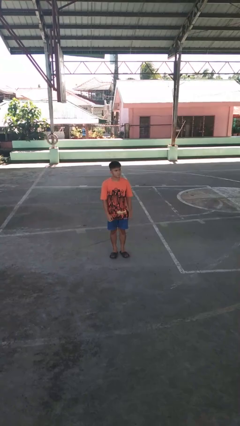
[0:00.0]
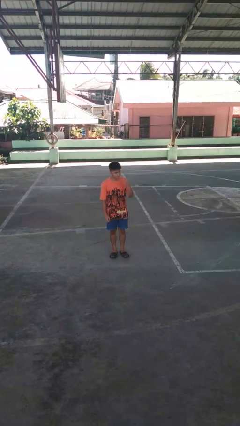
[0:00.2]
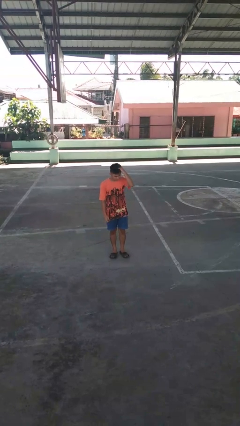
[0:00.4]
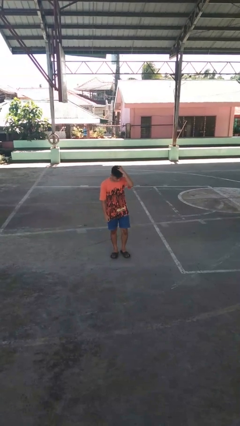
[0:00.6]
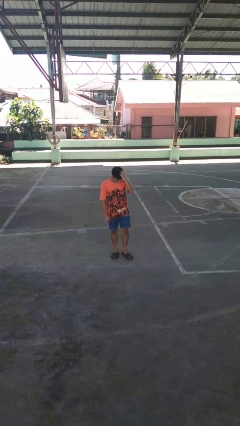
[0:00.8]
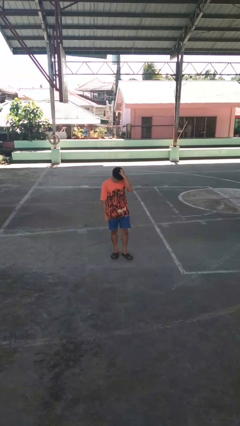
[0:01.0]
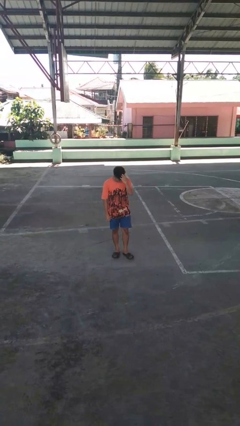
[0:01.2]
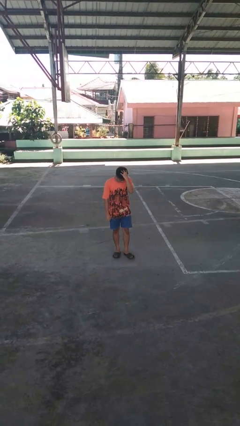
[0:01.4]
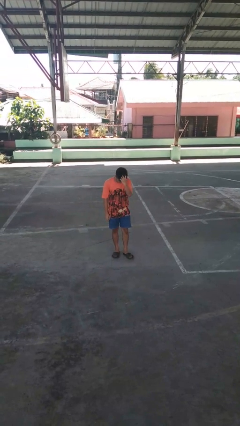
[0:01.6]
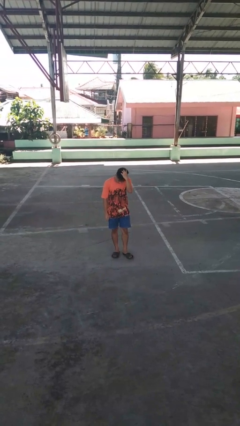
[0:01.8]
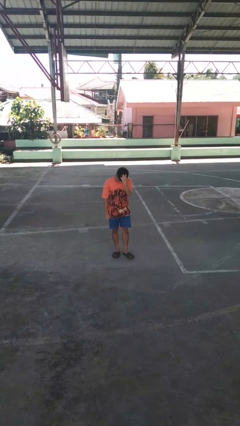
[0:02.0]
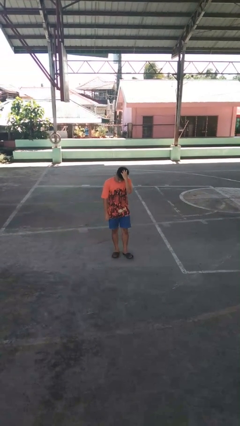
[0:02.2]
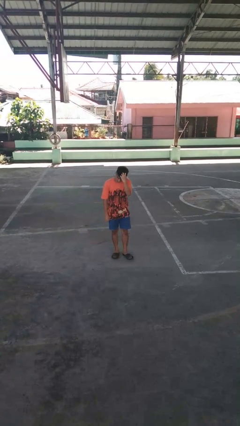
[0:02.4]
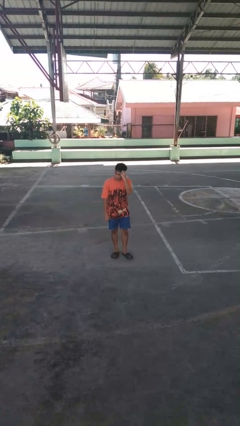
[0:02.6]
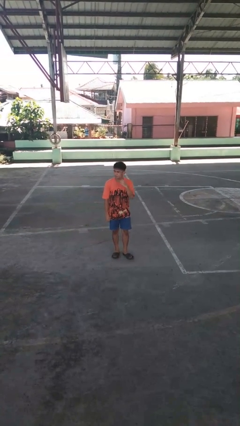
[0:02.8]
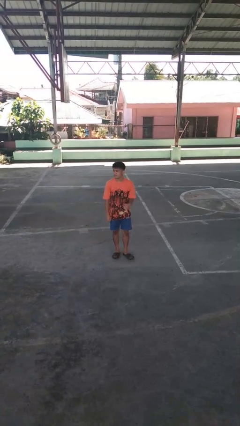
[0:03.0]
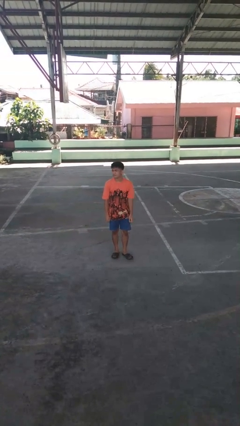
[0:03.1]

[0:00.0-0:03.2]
person scratches face

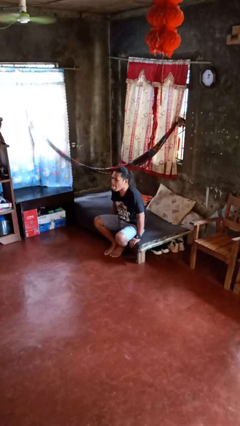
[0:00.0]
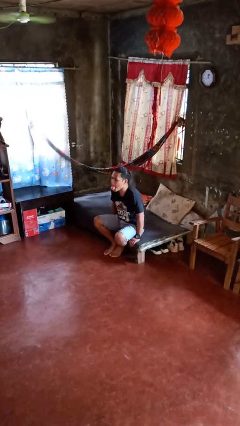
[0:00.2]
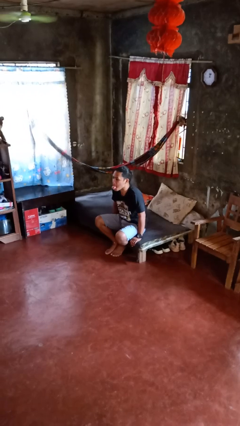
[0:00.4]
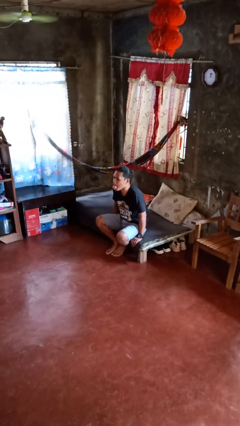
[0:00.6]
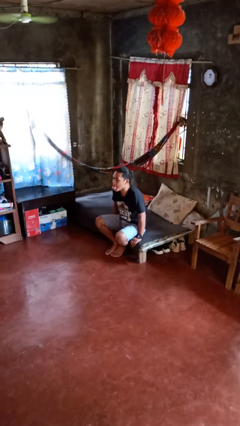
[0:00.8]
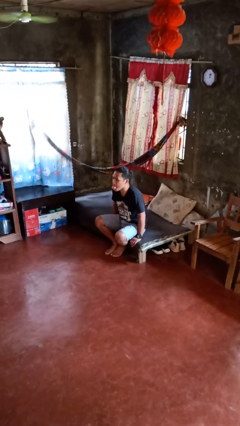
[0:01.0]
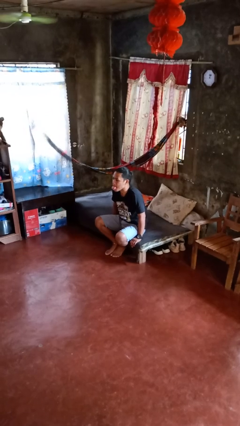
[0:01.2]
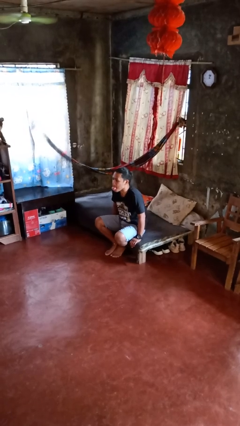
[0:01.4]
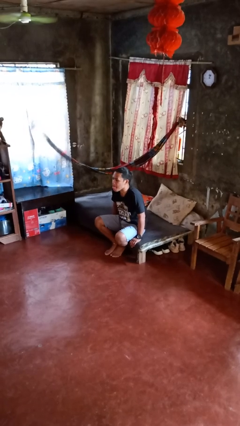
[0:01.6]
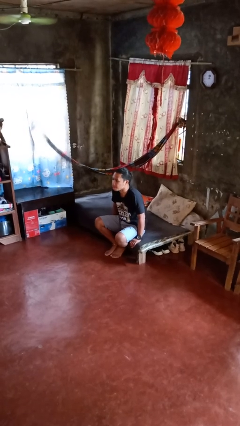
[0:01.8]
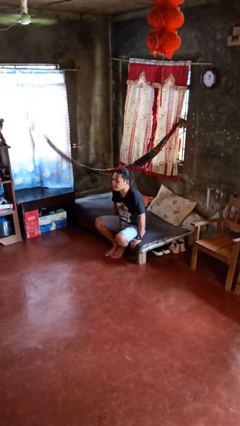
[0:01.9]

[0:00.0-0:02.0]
person sticks out tongue

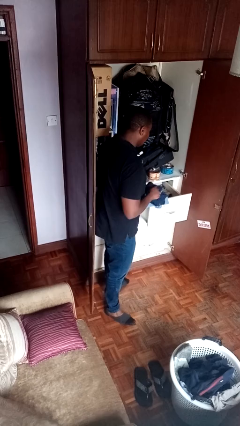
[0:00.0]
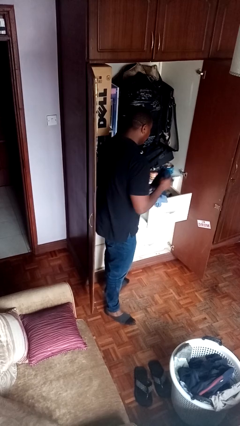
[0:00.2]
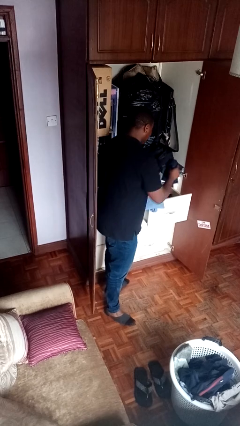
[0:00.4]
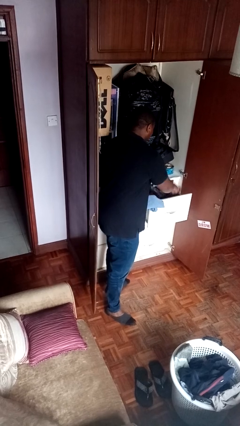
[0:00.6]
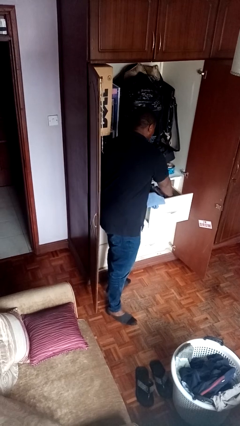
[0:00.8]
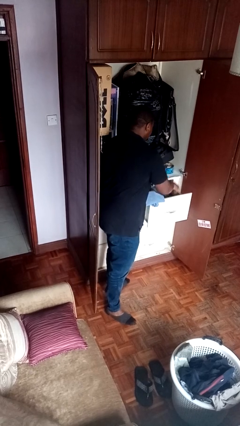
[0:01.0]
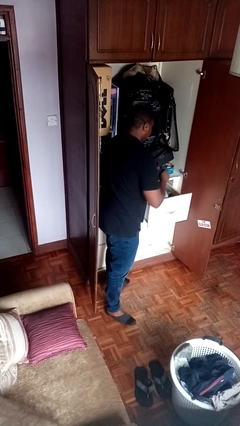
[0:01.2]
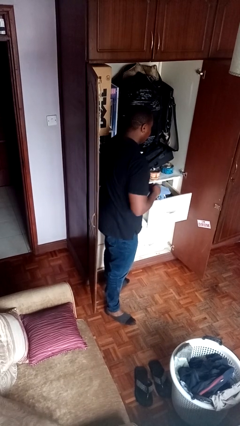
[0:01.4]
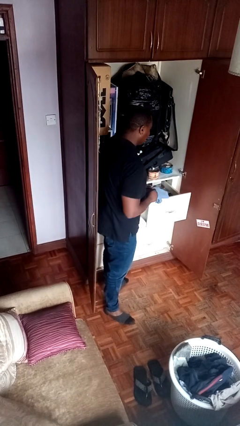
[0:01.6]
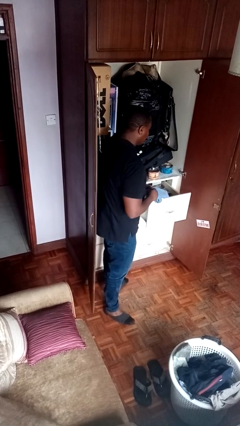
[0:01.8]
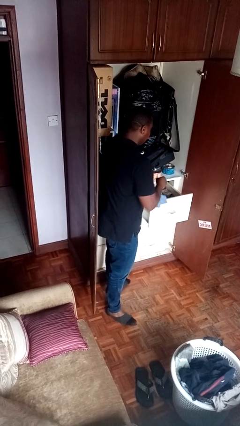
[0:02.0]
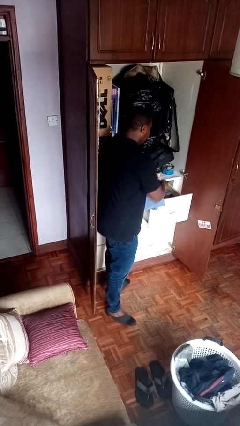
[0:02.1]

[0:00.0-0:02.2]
person puts clothes into dresser

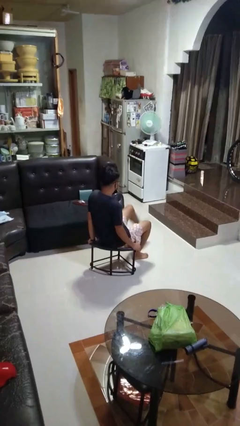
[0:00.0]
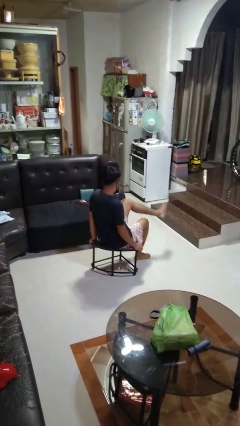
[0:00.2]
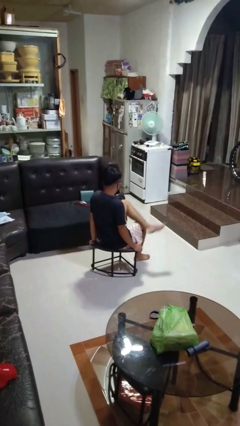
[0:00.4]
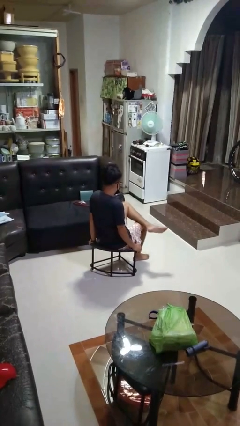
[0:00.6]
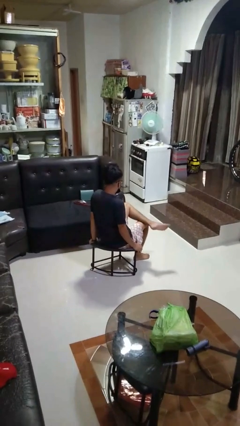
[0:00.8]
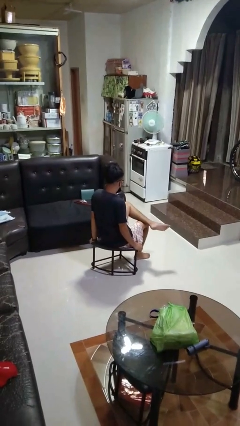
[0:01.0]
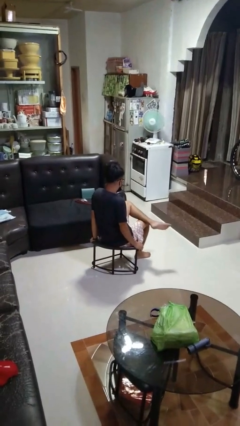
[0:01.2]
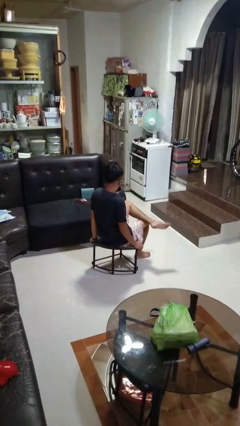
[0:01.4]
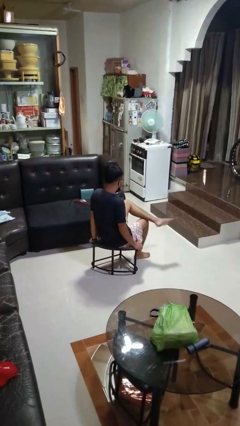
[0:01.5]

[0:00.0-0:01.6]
person crosses legs

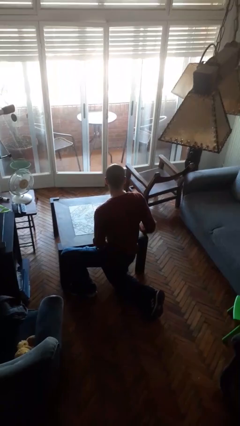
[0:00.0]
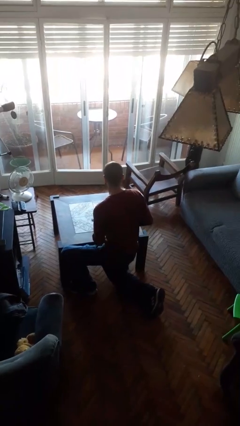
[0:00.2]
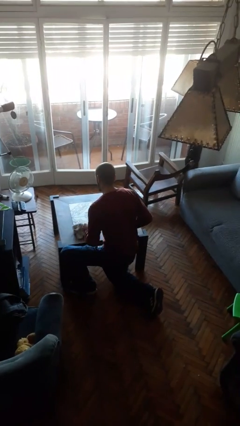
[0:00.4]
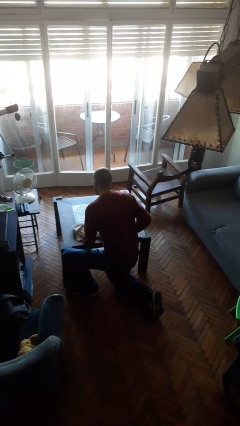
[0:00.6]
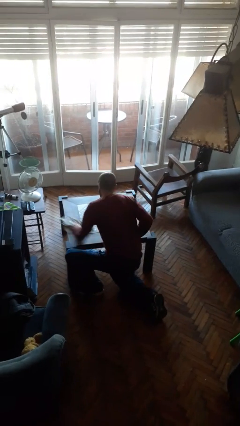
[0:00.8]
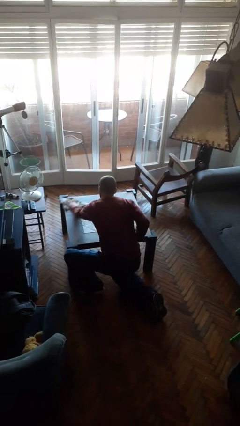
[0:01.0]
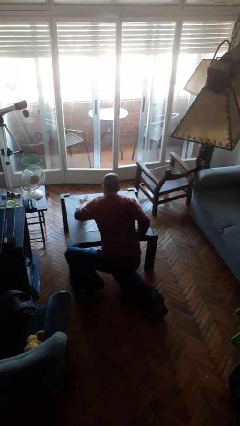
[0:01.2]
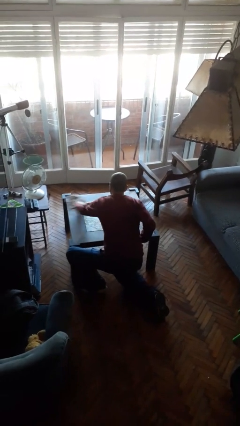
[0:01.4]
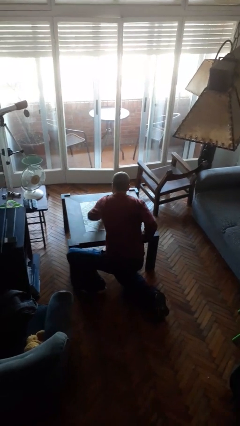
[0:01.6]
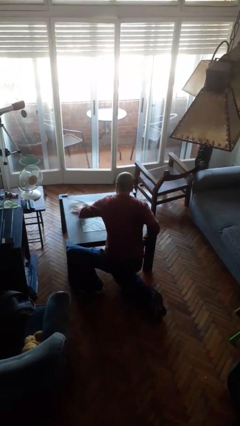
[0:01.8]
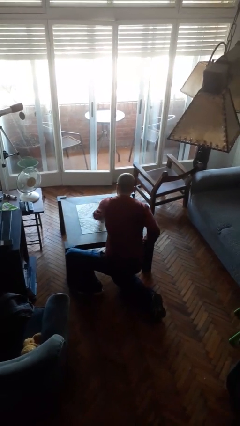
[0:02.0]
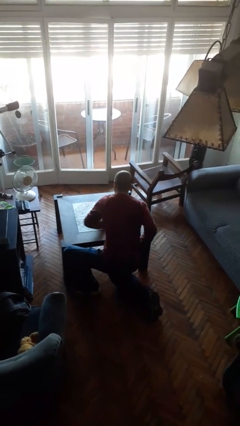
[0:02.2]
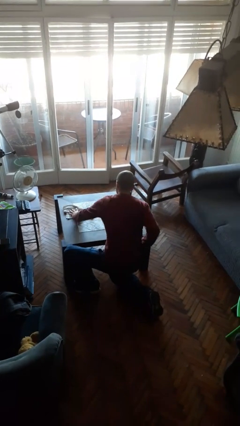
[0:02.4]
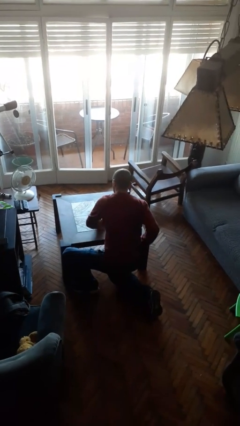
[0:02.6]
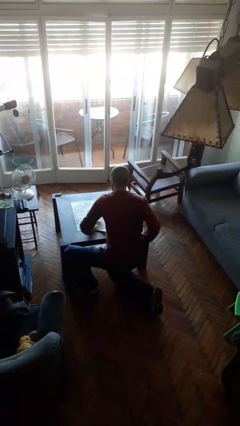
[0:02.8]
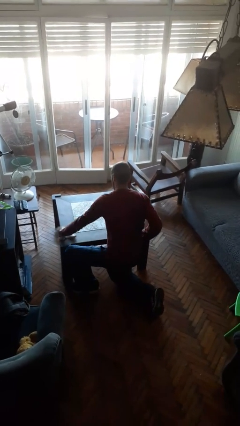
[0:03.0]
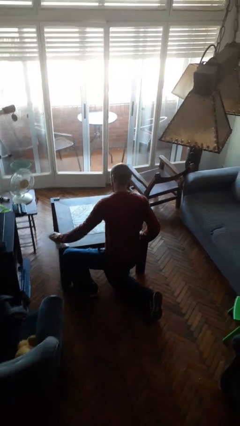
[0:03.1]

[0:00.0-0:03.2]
person cleans table with rag

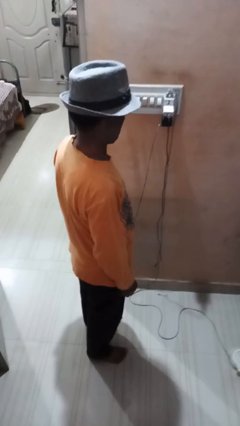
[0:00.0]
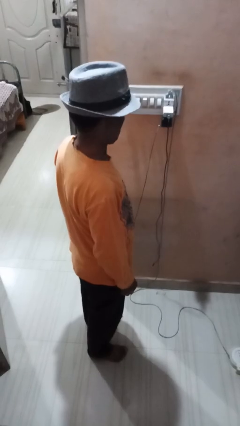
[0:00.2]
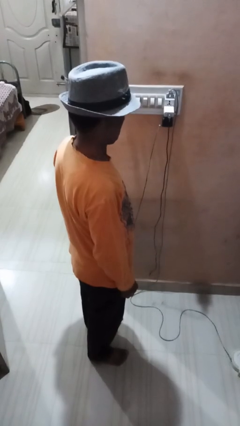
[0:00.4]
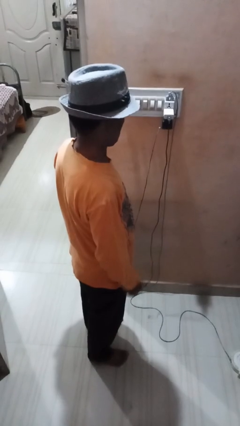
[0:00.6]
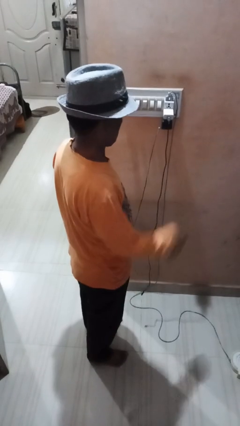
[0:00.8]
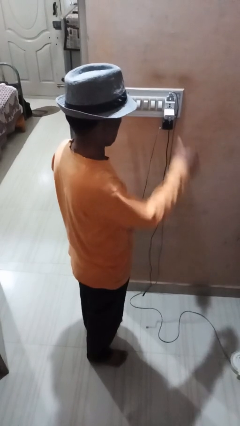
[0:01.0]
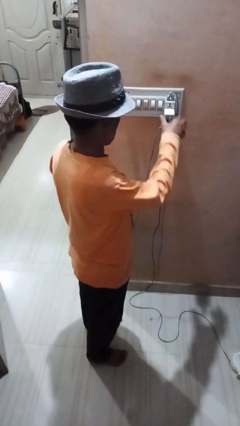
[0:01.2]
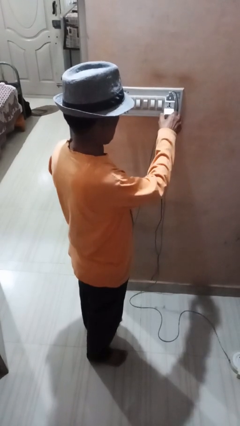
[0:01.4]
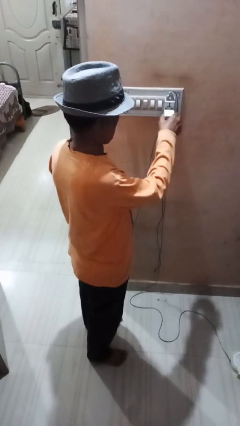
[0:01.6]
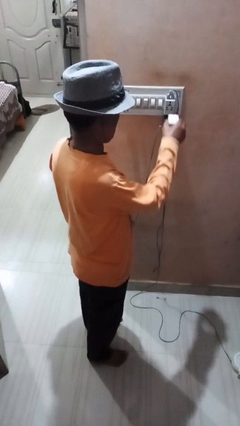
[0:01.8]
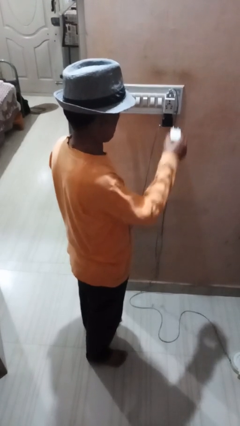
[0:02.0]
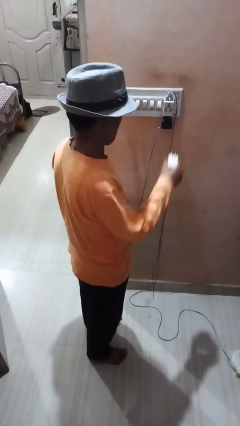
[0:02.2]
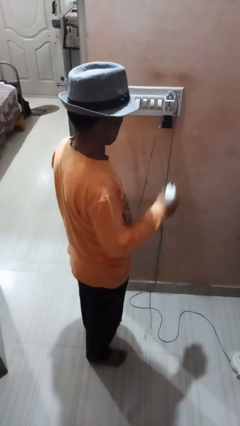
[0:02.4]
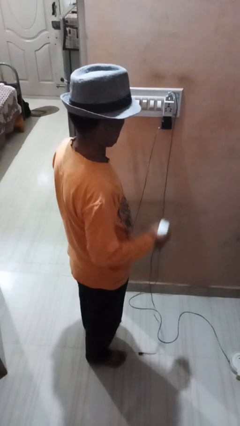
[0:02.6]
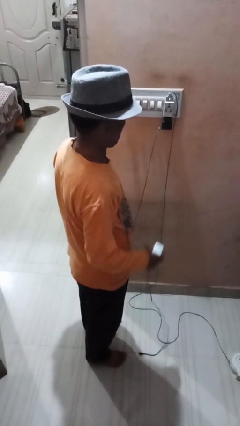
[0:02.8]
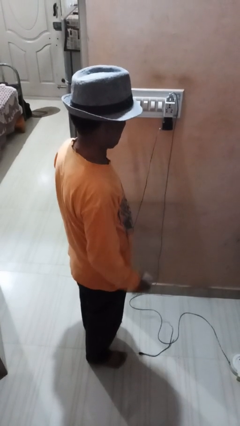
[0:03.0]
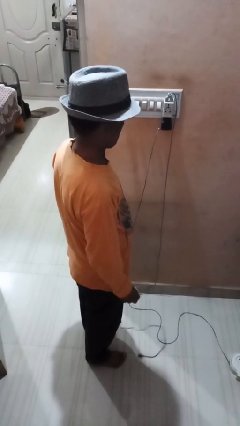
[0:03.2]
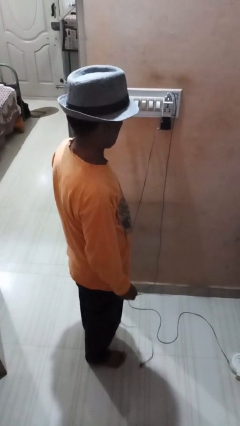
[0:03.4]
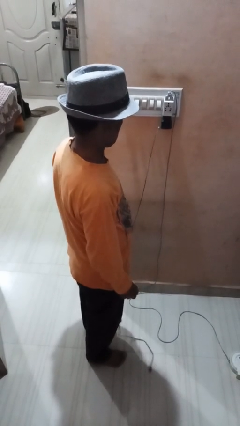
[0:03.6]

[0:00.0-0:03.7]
person unplugs from electrical socket

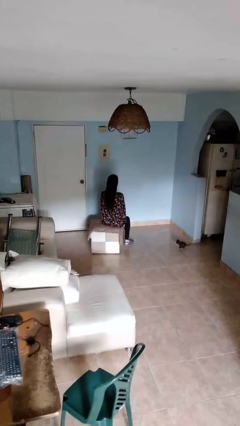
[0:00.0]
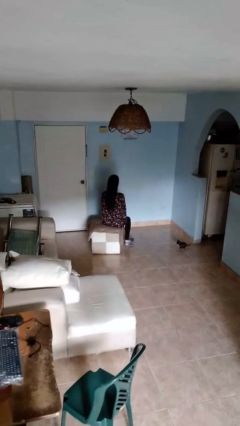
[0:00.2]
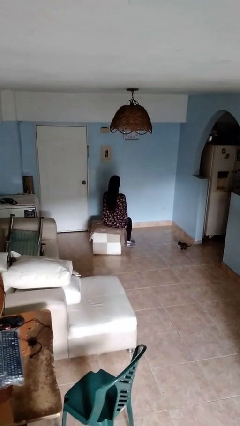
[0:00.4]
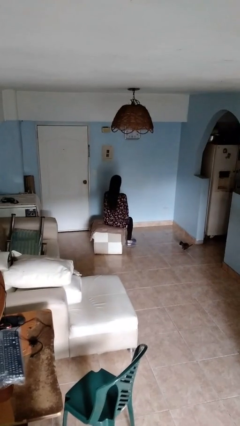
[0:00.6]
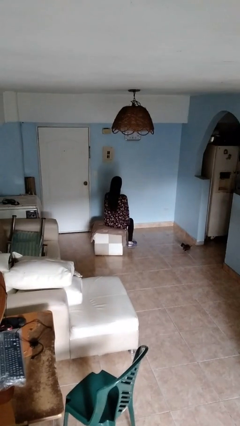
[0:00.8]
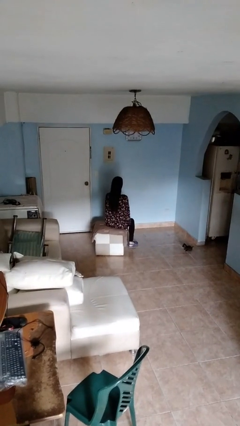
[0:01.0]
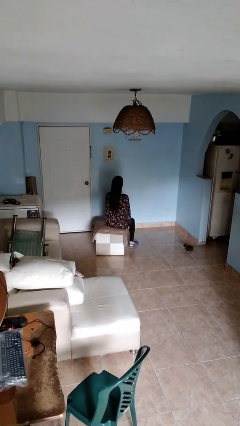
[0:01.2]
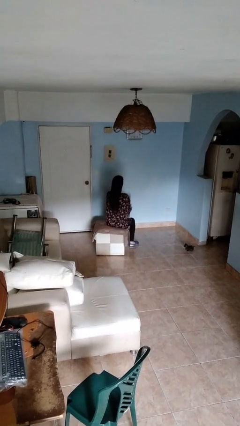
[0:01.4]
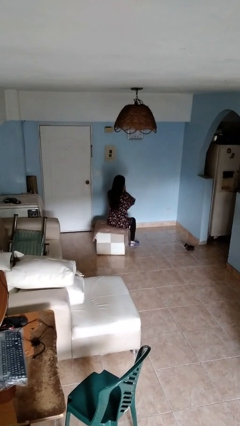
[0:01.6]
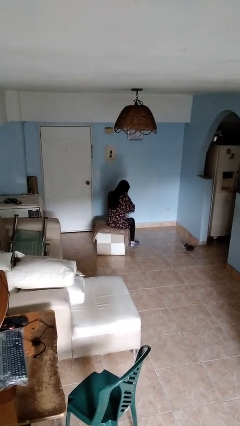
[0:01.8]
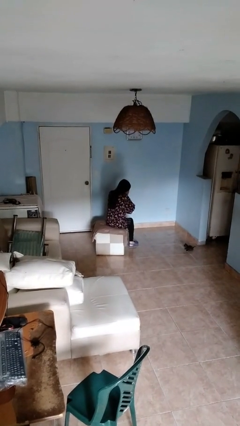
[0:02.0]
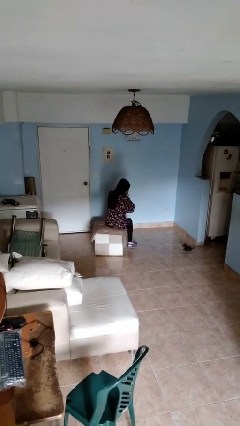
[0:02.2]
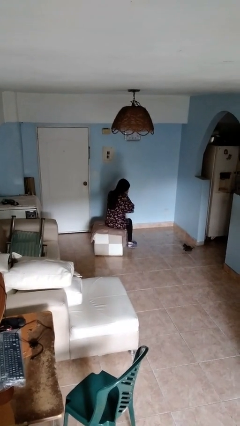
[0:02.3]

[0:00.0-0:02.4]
person sneezes into hand
